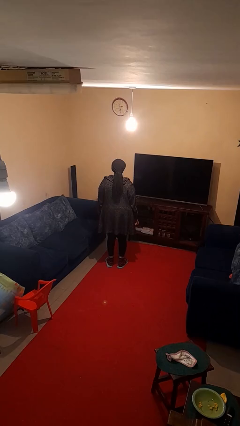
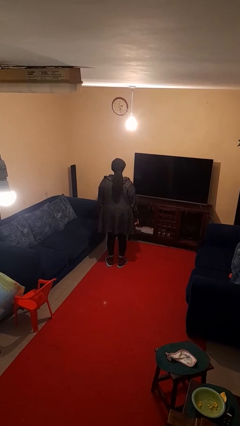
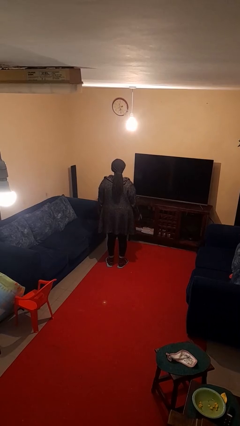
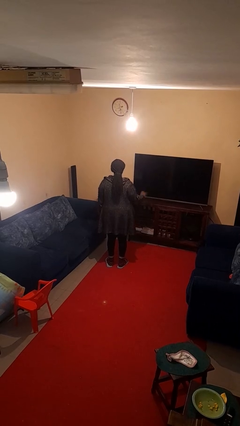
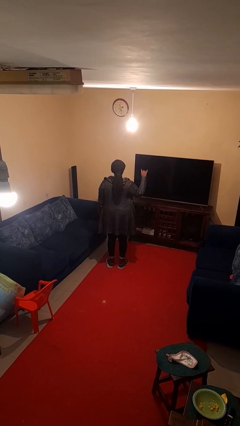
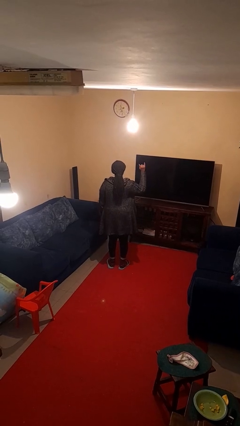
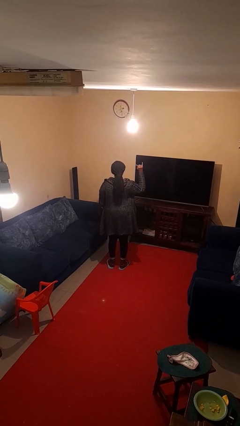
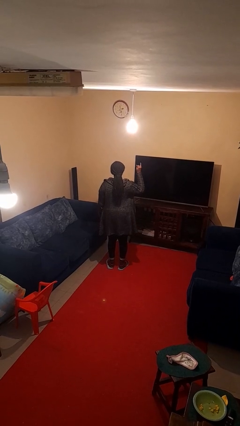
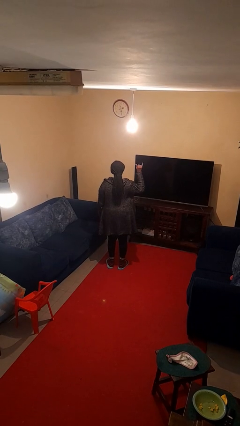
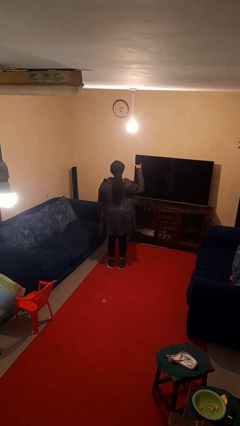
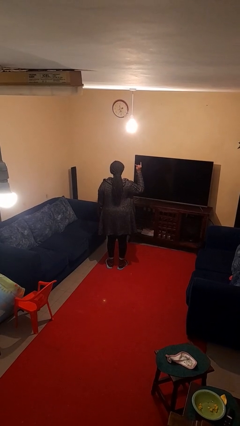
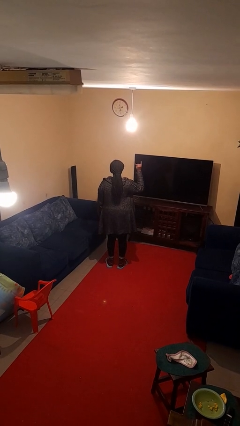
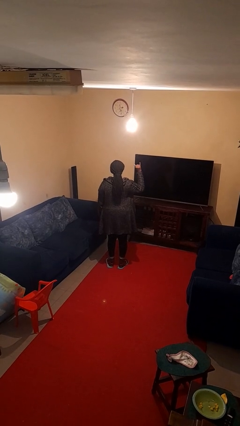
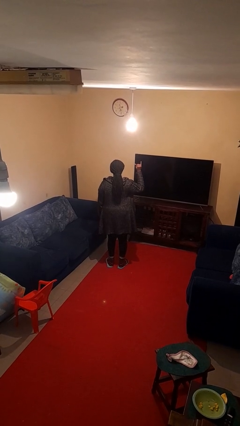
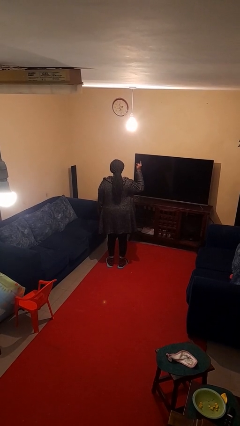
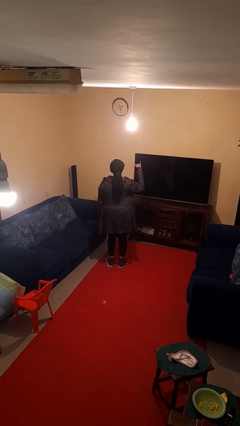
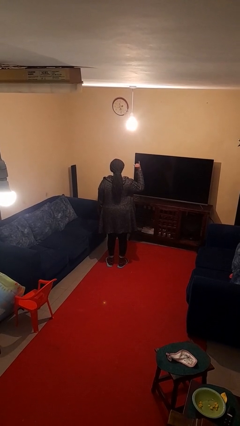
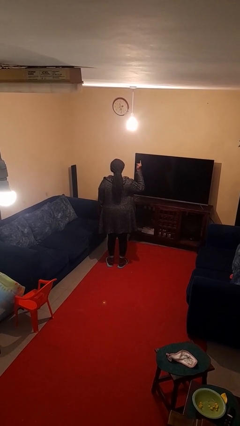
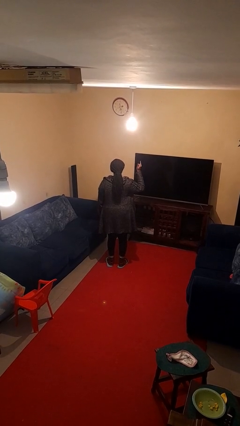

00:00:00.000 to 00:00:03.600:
person gestures hang loose

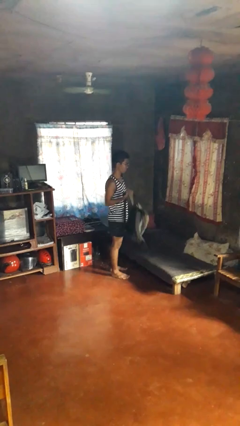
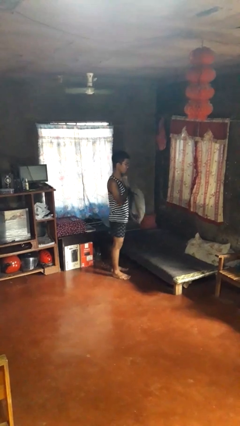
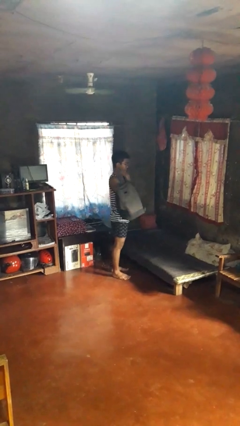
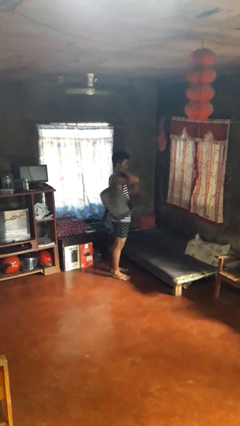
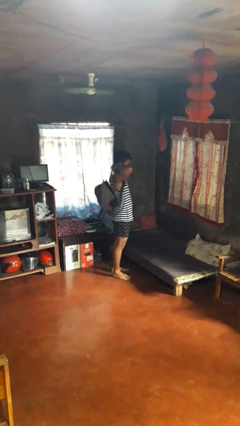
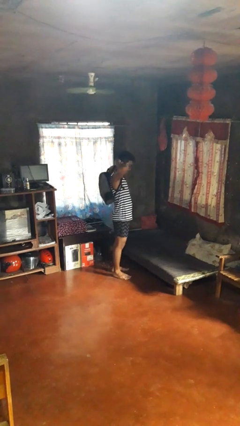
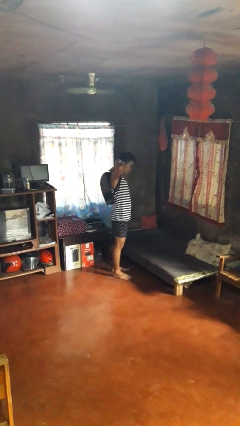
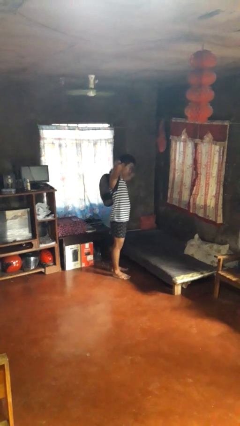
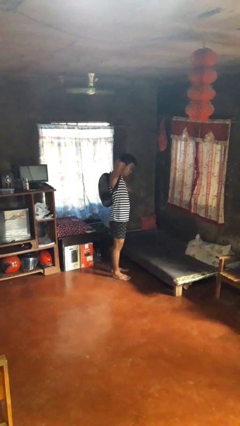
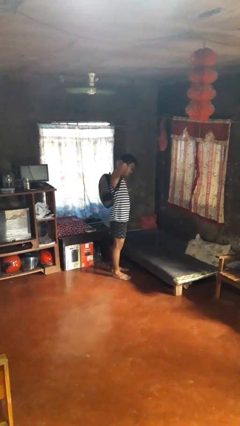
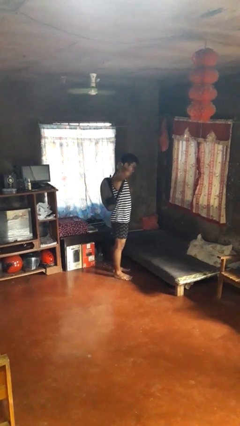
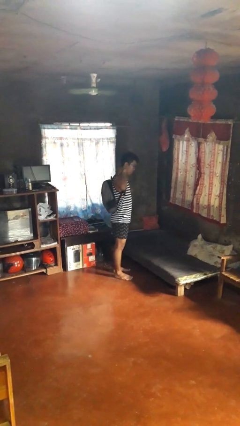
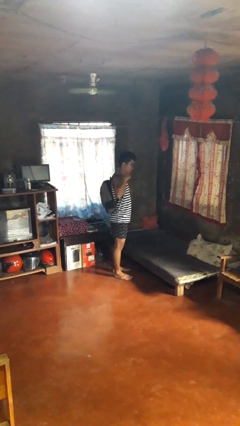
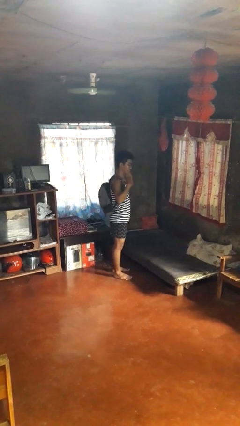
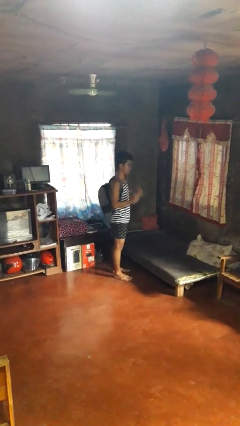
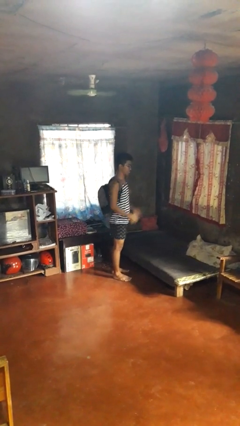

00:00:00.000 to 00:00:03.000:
person puts on backpack

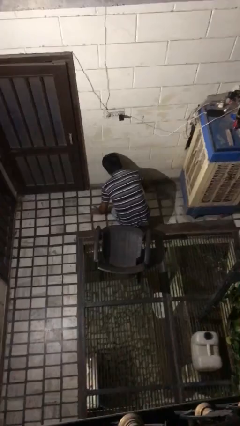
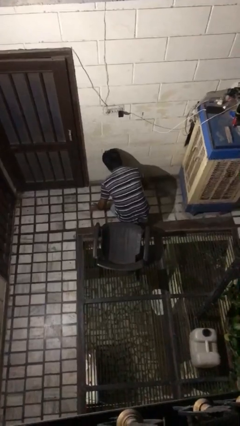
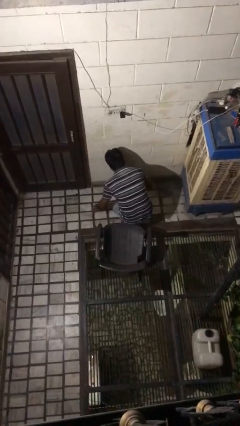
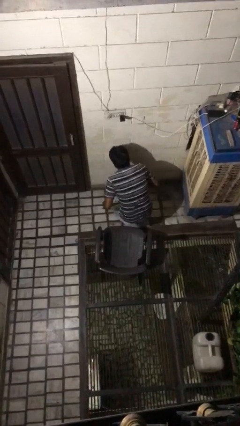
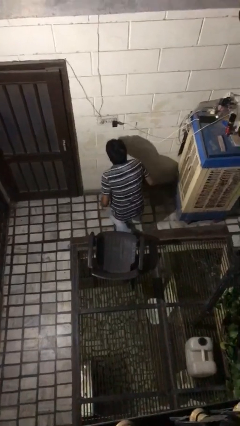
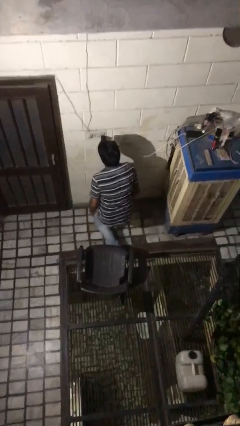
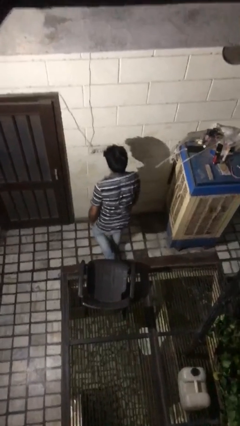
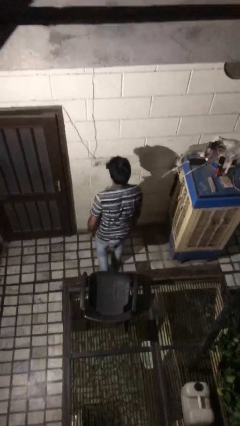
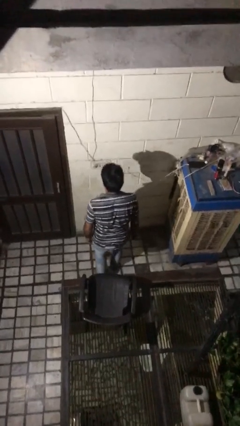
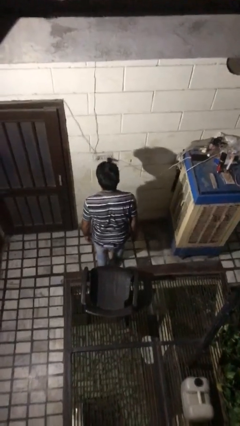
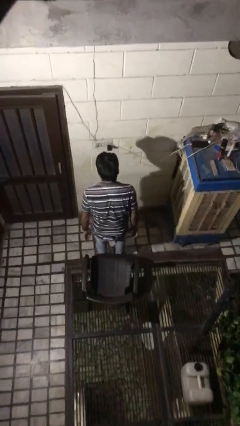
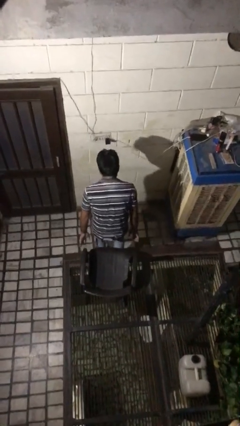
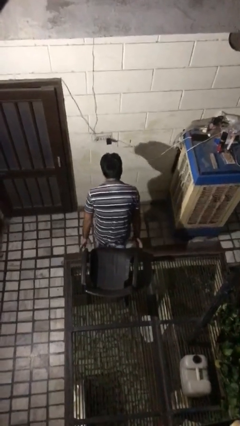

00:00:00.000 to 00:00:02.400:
person stands up from floor

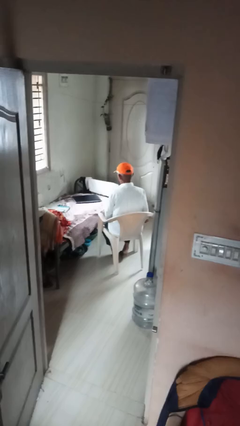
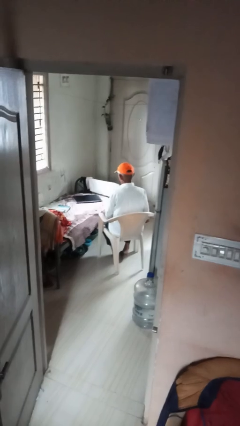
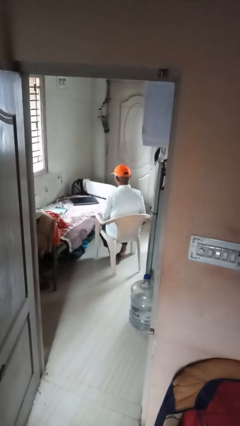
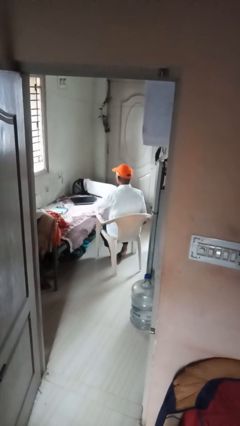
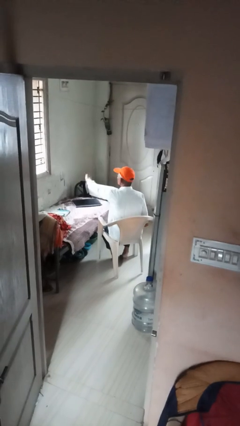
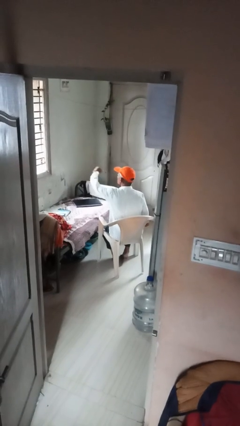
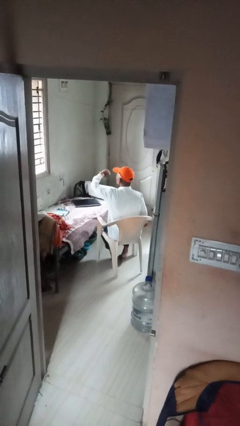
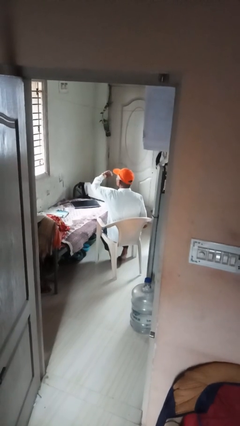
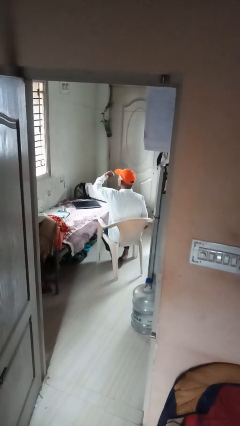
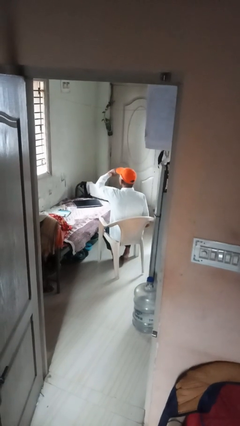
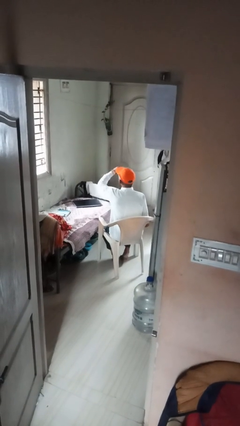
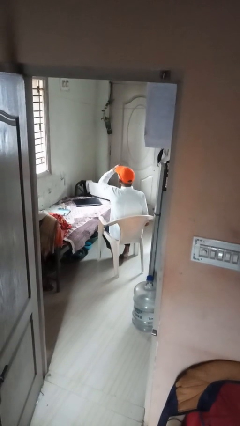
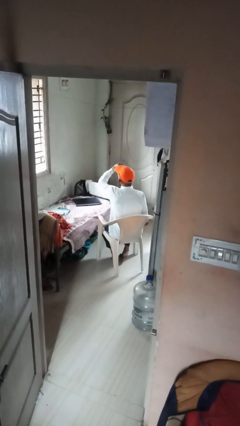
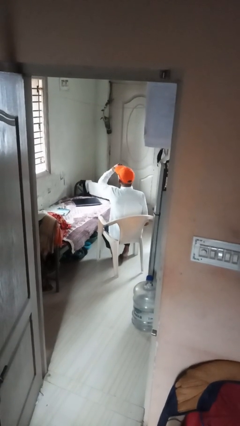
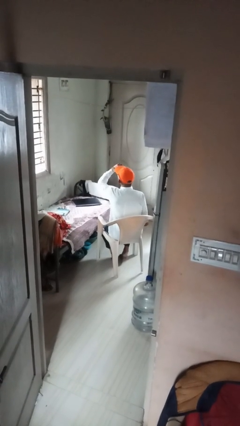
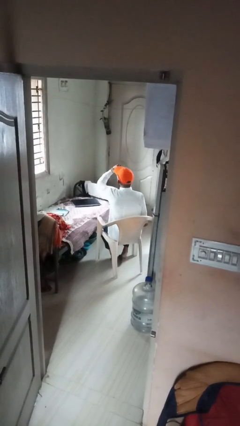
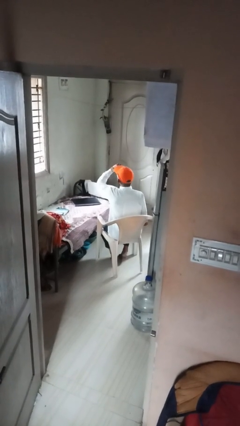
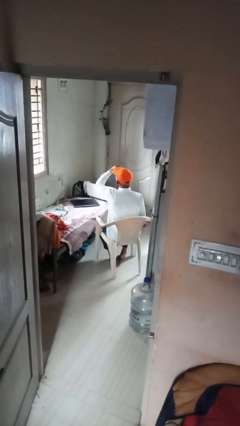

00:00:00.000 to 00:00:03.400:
person looks at wristwatch

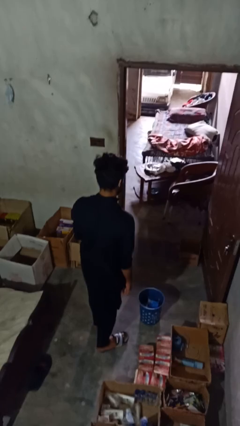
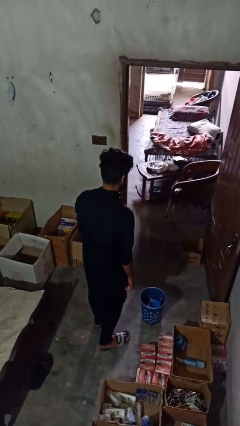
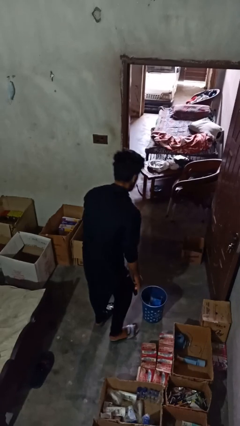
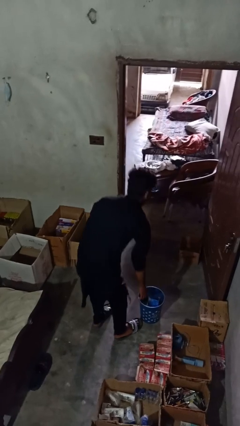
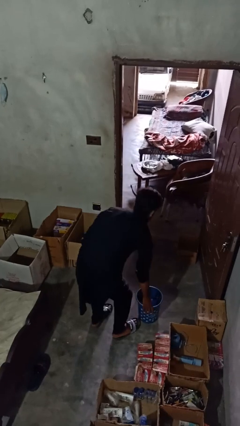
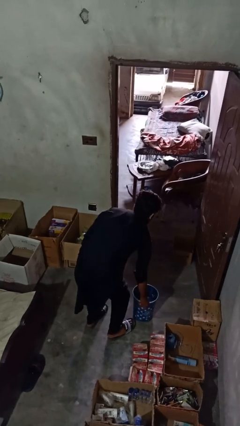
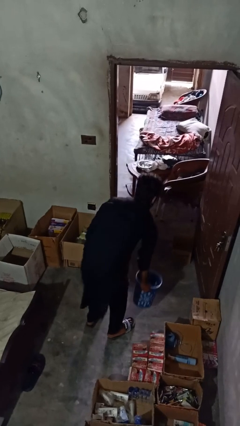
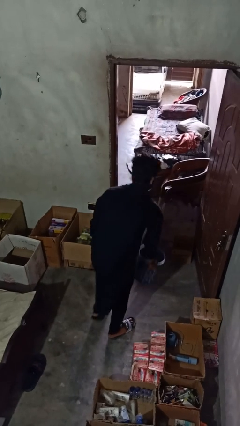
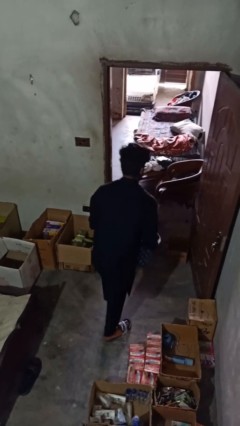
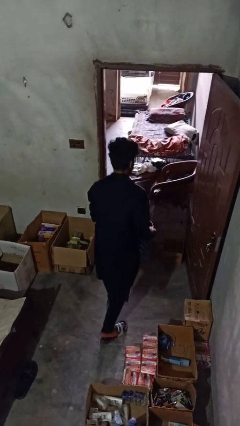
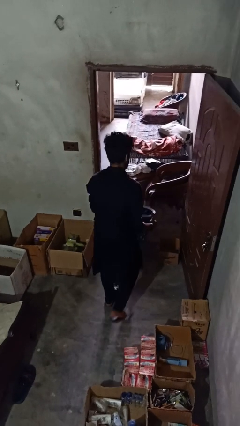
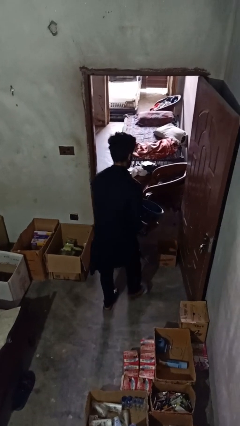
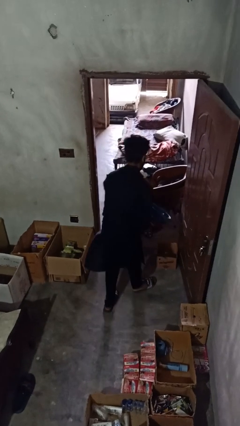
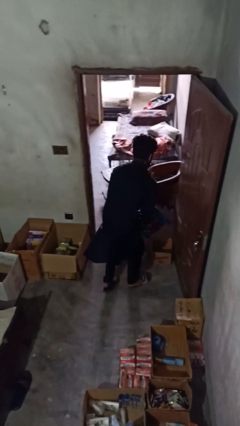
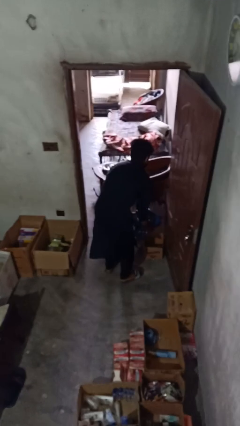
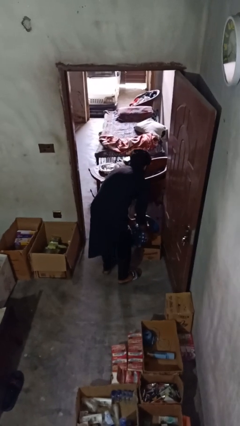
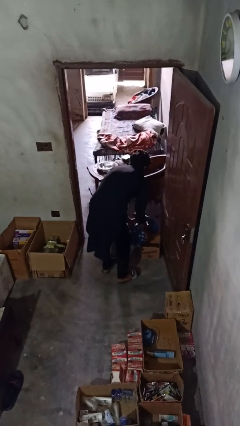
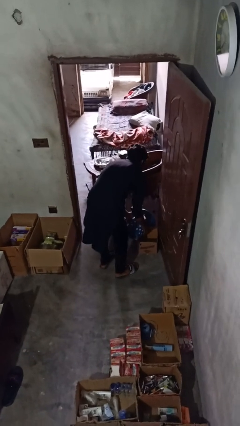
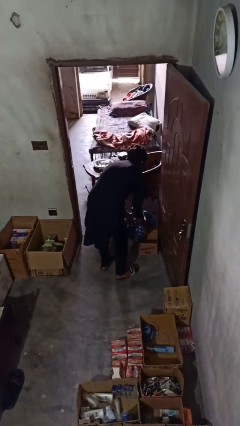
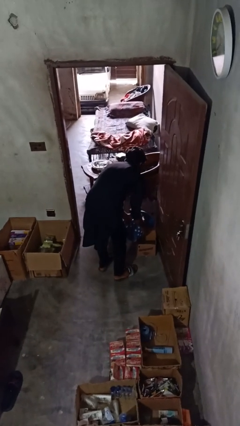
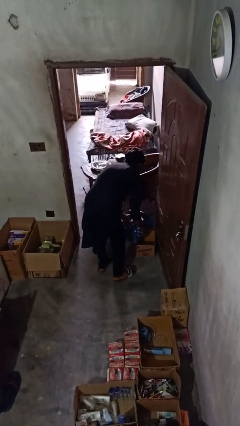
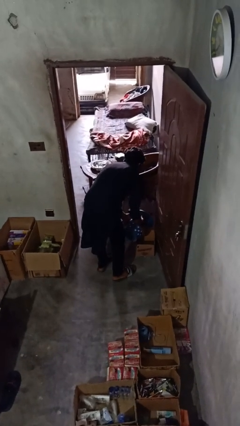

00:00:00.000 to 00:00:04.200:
person removes trashbag from trashcan

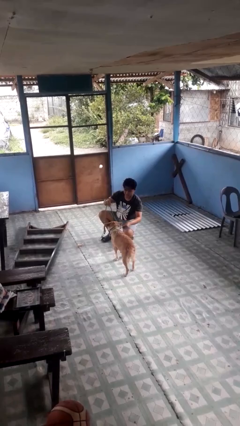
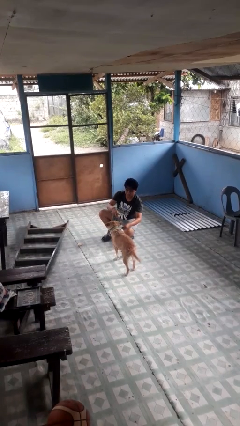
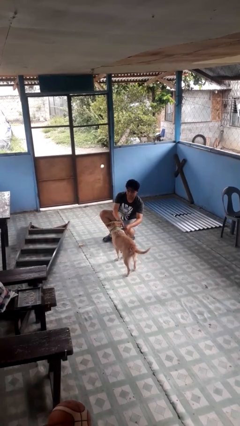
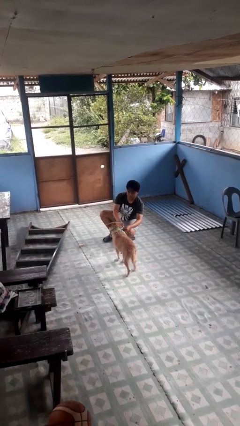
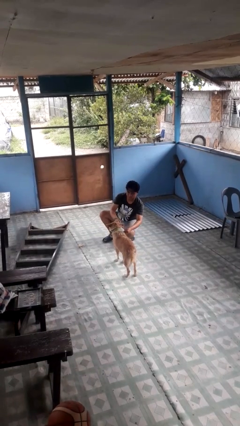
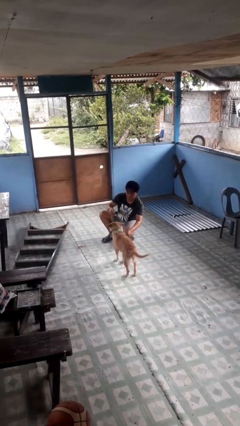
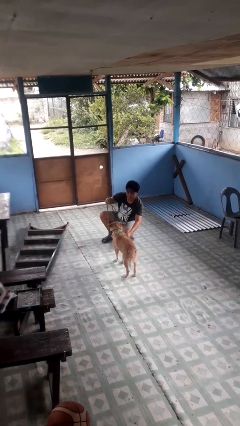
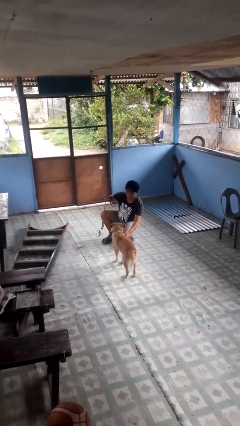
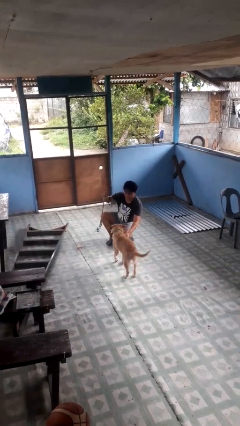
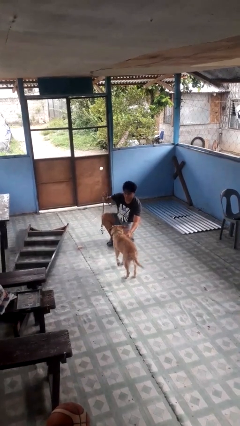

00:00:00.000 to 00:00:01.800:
person unattaches leash from dog
